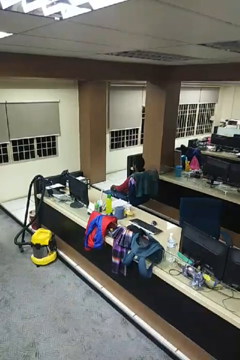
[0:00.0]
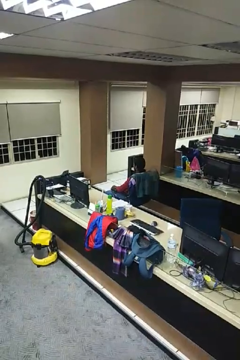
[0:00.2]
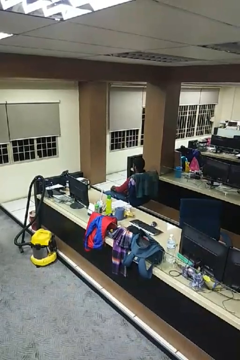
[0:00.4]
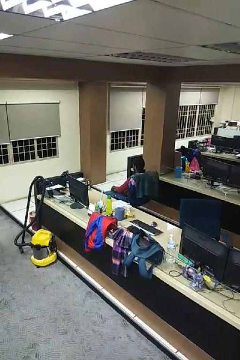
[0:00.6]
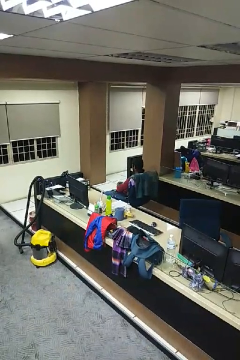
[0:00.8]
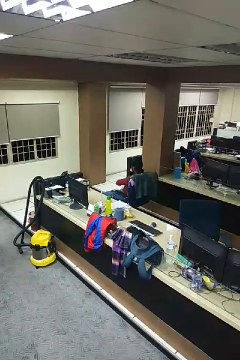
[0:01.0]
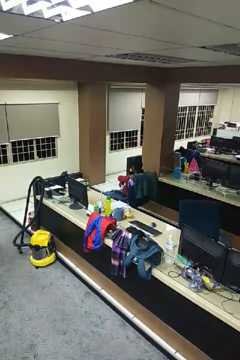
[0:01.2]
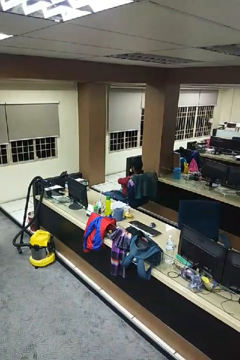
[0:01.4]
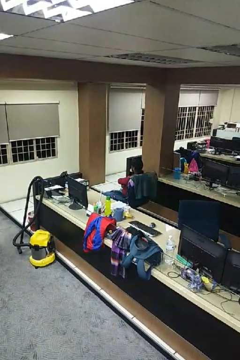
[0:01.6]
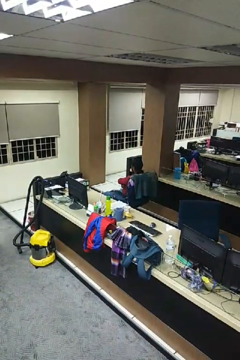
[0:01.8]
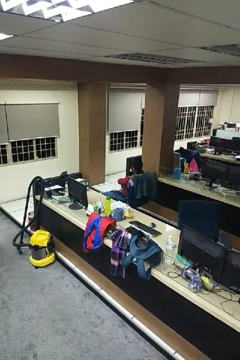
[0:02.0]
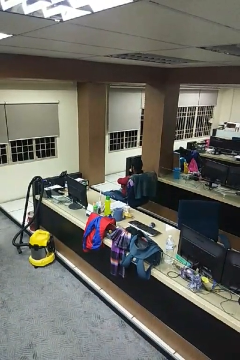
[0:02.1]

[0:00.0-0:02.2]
person crosses arms

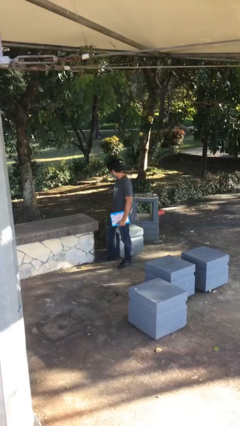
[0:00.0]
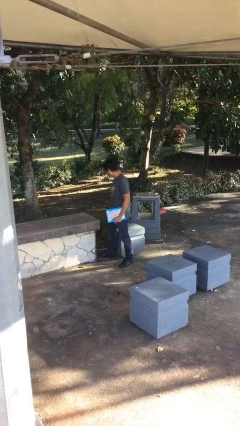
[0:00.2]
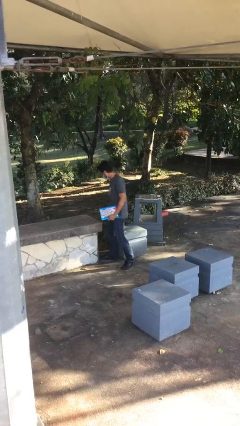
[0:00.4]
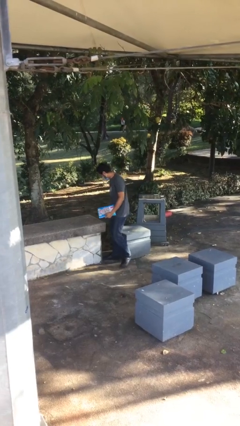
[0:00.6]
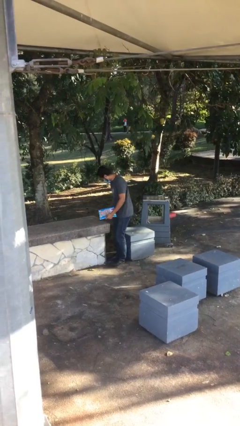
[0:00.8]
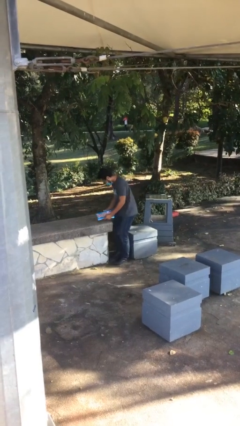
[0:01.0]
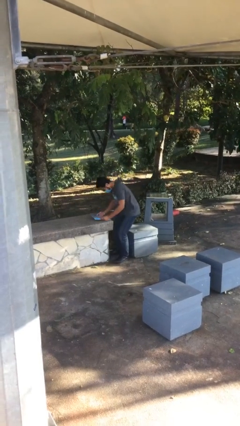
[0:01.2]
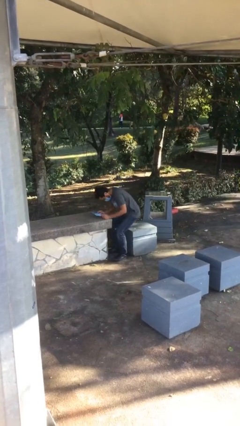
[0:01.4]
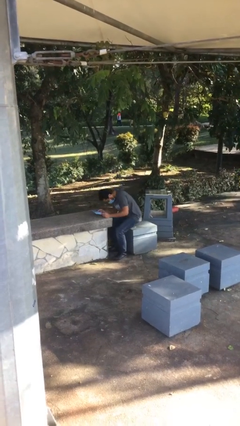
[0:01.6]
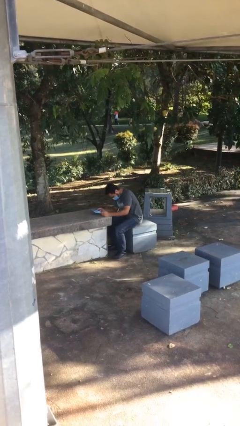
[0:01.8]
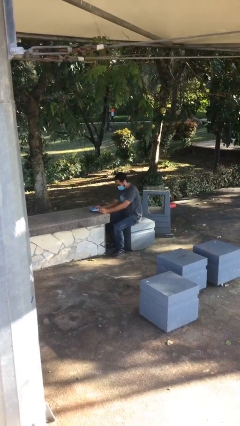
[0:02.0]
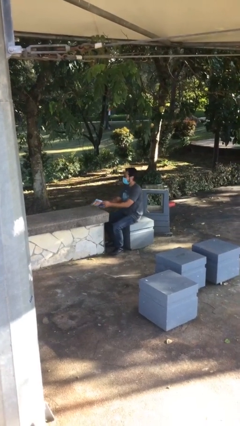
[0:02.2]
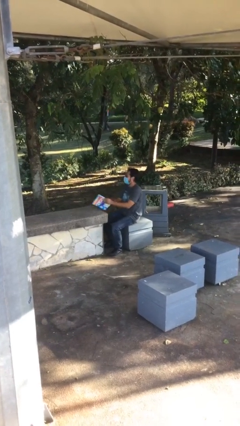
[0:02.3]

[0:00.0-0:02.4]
person sits down

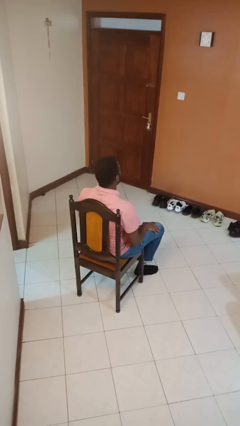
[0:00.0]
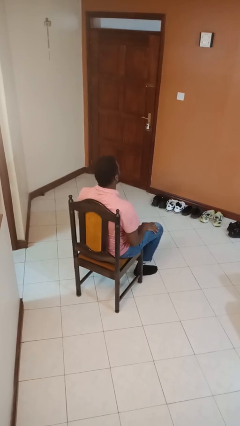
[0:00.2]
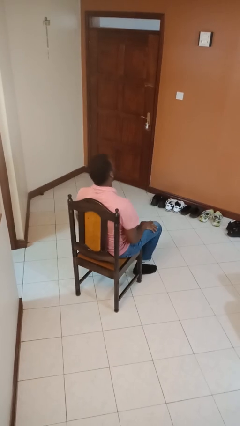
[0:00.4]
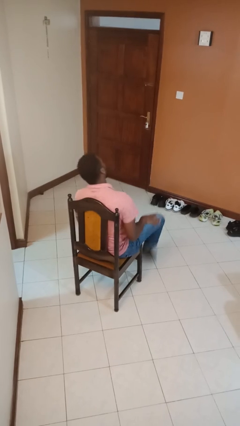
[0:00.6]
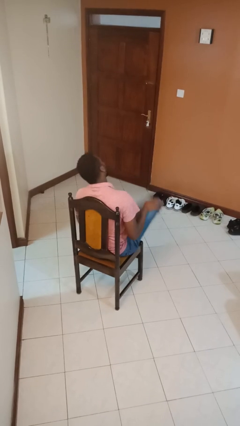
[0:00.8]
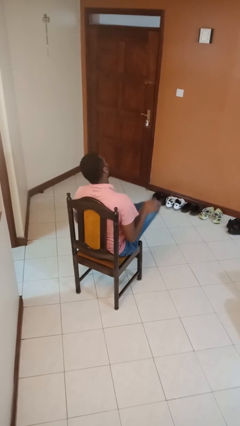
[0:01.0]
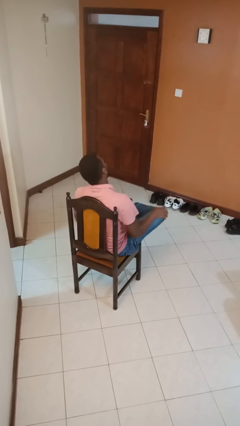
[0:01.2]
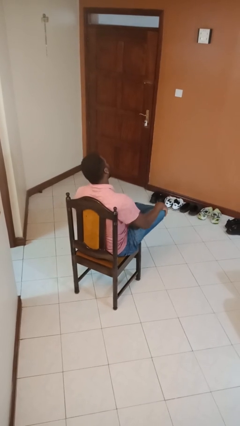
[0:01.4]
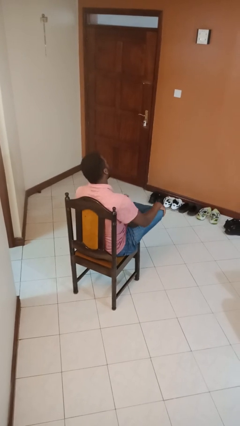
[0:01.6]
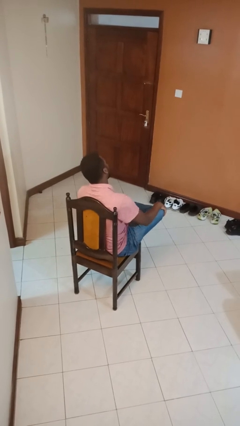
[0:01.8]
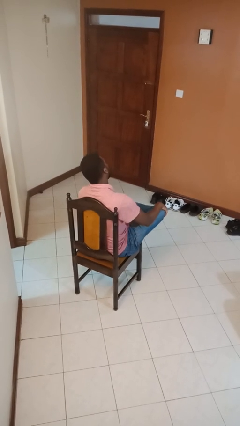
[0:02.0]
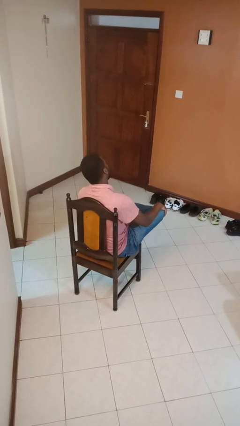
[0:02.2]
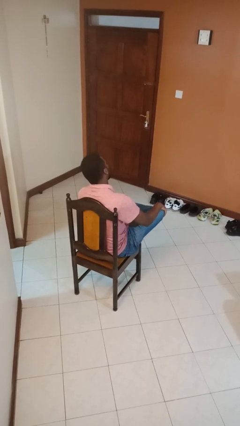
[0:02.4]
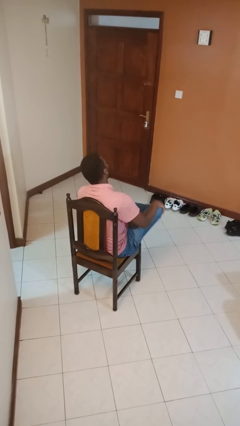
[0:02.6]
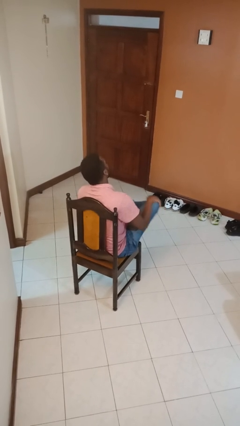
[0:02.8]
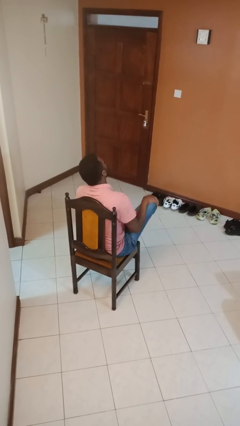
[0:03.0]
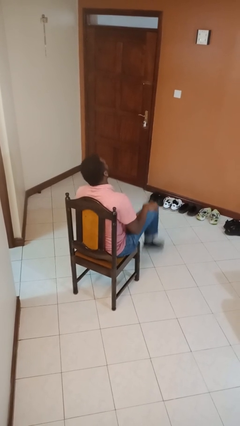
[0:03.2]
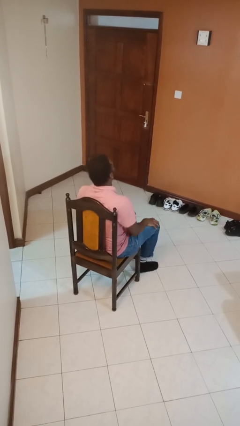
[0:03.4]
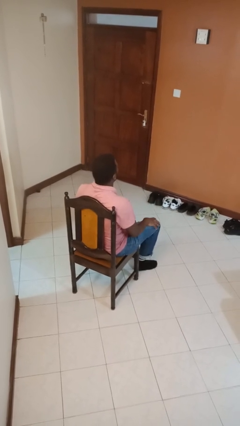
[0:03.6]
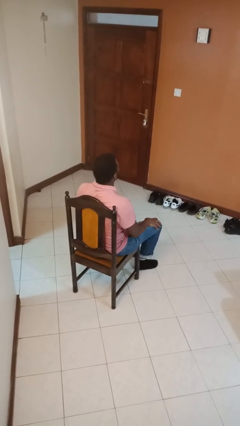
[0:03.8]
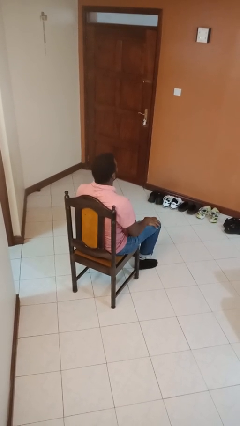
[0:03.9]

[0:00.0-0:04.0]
person crosses legs

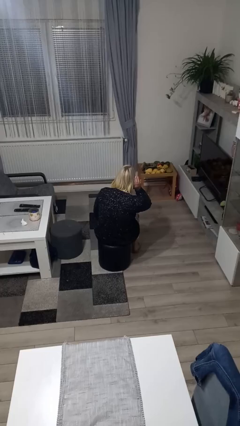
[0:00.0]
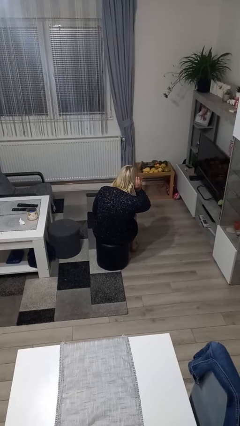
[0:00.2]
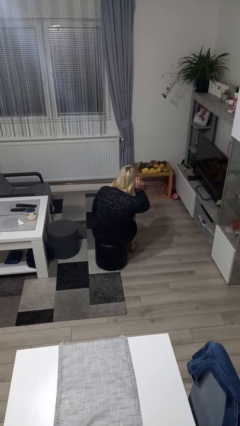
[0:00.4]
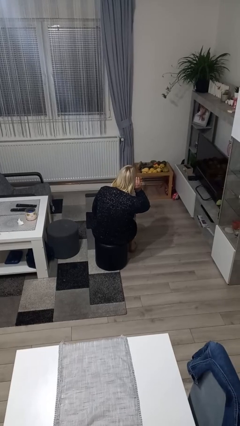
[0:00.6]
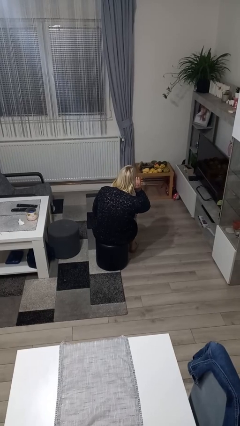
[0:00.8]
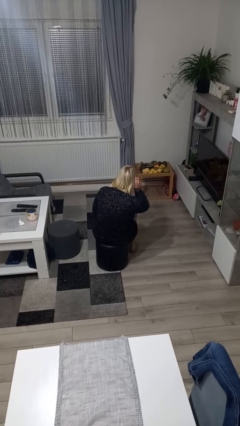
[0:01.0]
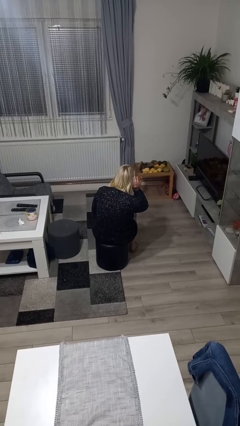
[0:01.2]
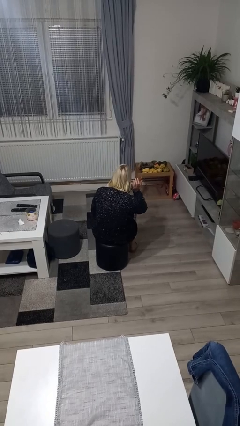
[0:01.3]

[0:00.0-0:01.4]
person gestures listen closely

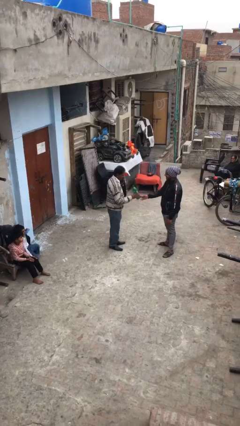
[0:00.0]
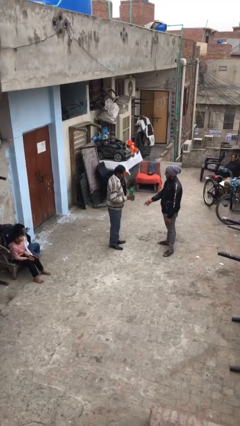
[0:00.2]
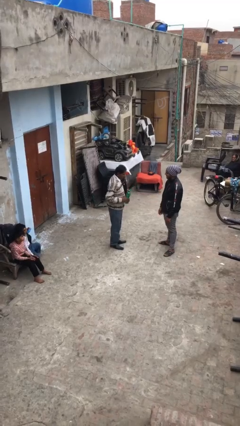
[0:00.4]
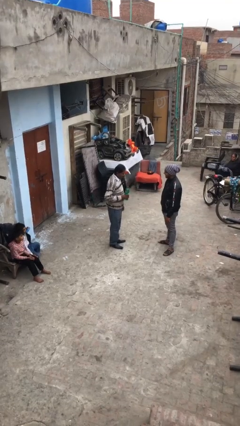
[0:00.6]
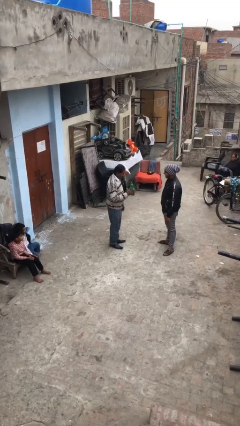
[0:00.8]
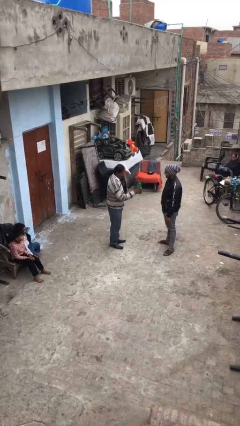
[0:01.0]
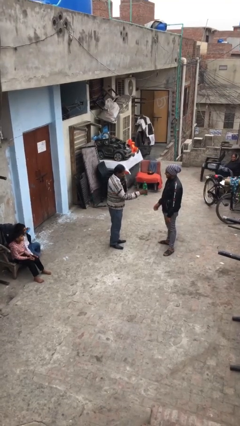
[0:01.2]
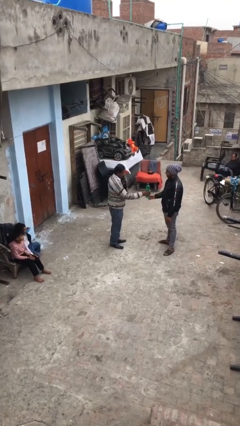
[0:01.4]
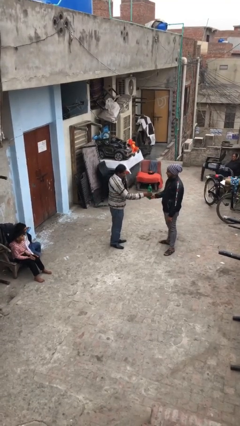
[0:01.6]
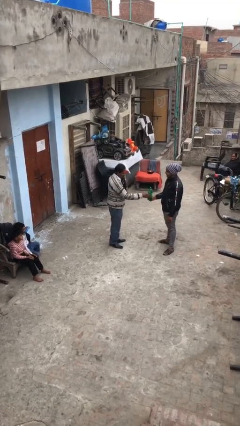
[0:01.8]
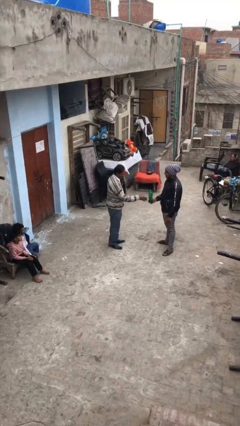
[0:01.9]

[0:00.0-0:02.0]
person transfers object to person

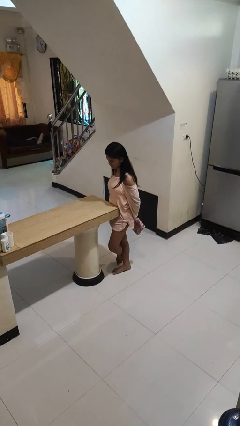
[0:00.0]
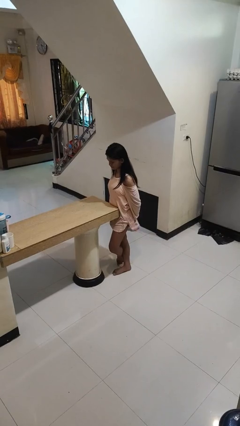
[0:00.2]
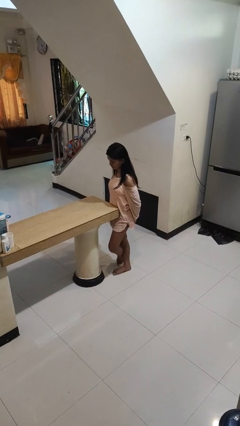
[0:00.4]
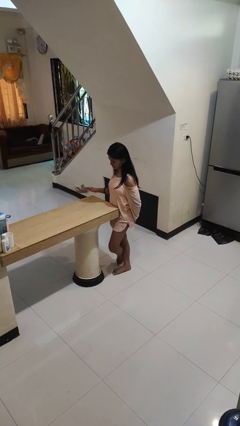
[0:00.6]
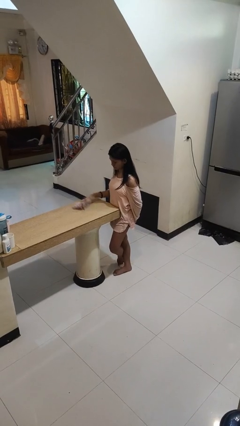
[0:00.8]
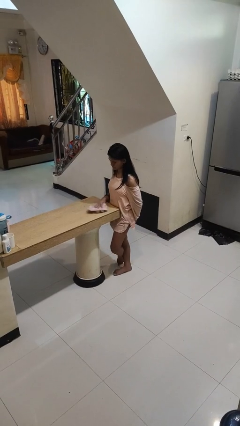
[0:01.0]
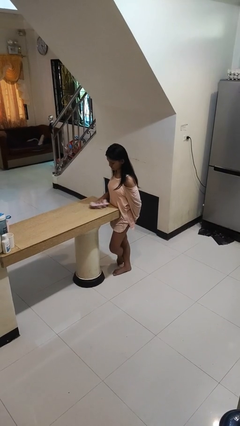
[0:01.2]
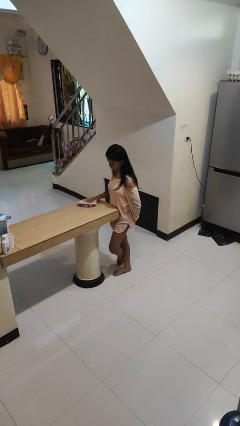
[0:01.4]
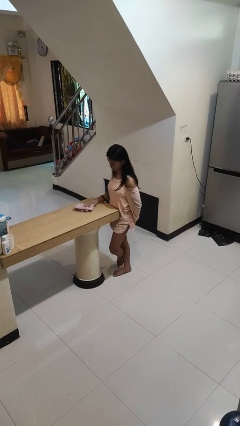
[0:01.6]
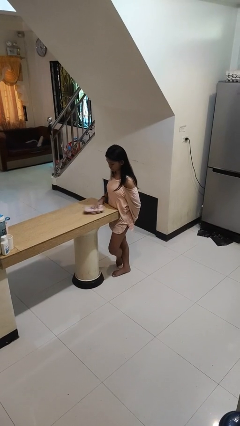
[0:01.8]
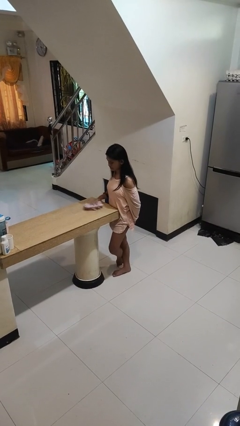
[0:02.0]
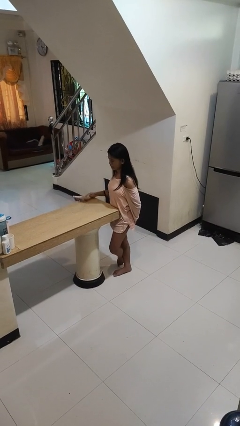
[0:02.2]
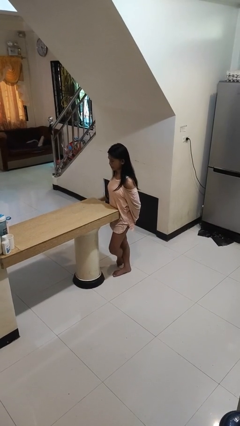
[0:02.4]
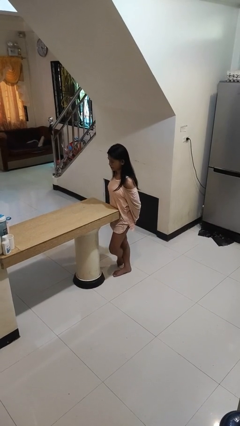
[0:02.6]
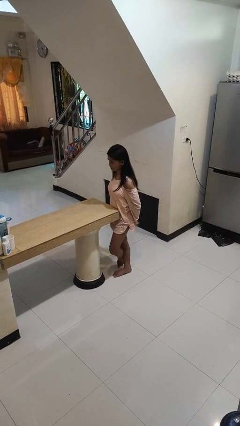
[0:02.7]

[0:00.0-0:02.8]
person cleans table with rag

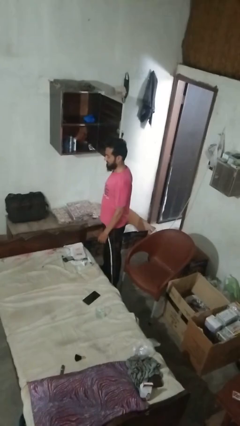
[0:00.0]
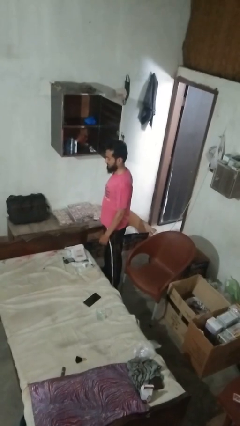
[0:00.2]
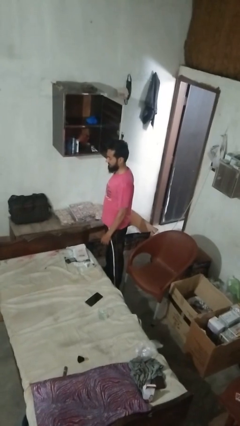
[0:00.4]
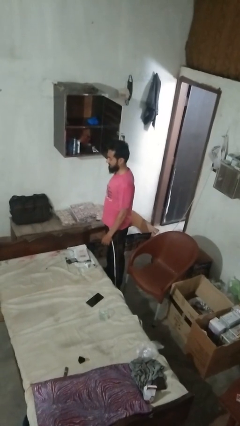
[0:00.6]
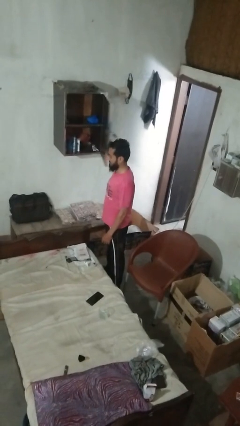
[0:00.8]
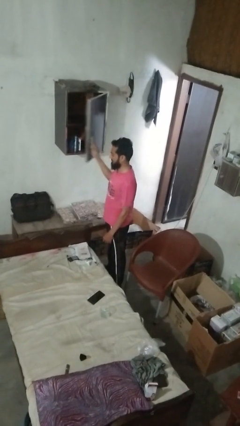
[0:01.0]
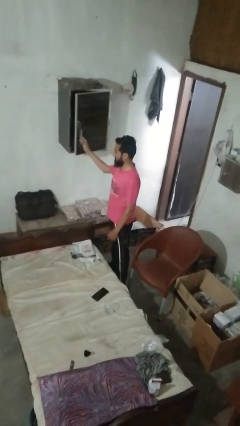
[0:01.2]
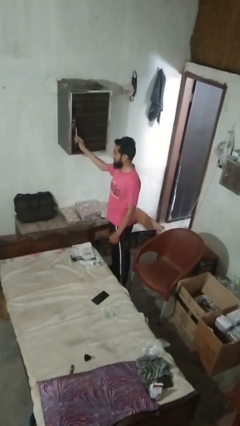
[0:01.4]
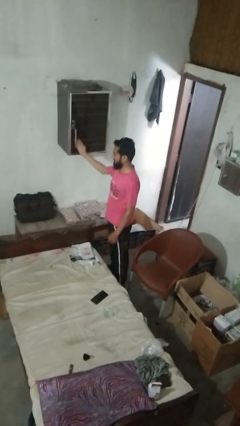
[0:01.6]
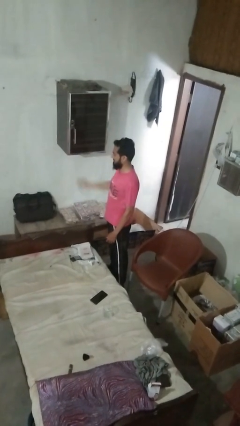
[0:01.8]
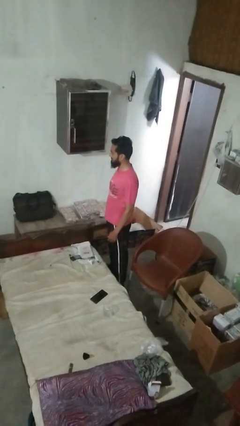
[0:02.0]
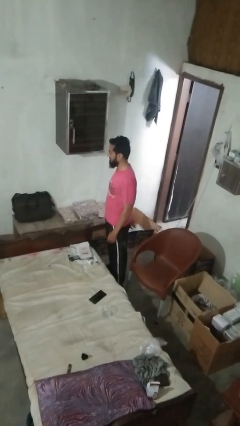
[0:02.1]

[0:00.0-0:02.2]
person closes closet door

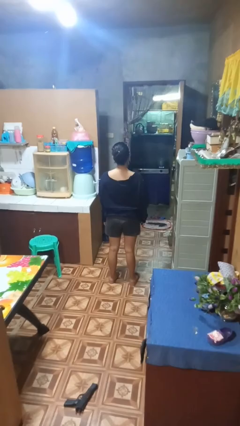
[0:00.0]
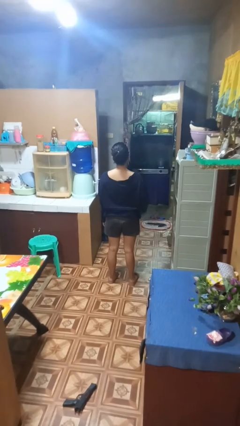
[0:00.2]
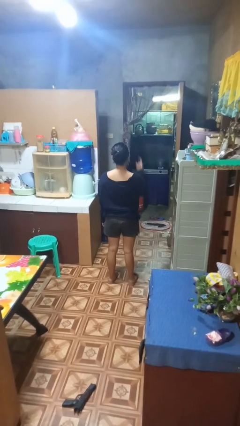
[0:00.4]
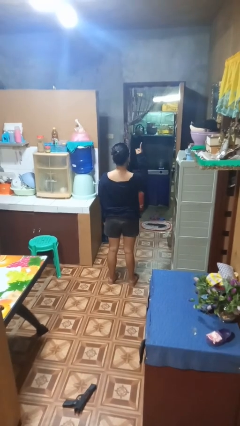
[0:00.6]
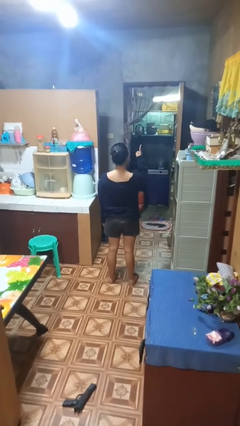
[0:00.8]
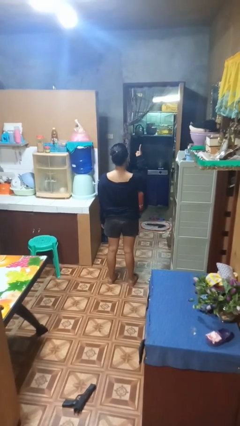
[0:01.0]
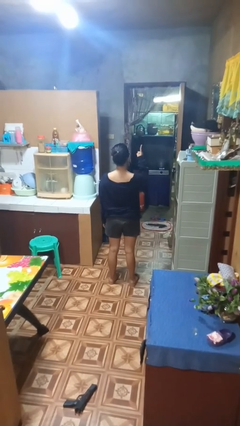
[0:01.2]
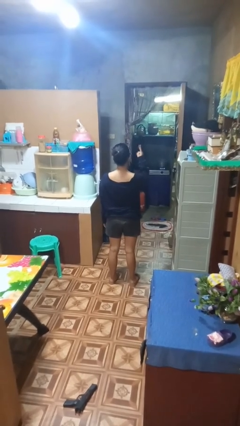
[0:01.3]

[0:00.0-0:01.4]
person gestures number one
